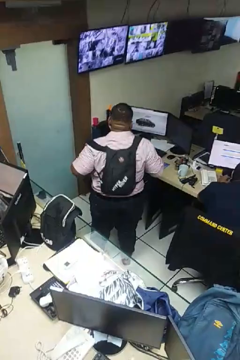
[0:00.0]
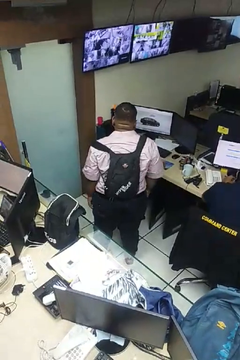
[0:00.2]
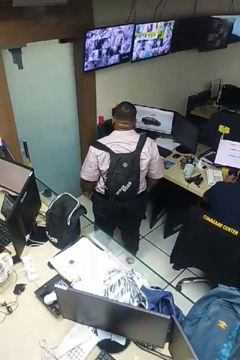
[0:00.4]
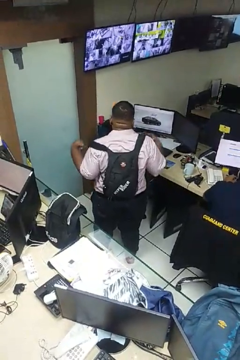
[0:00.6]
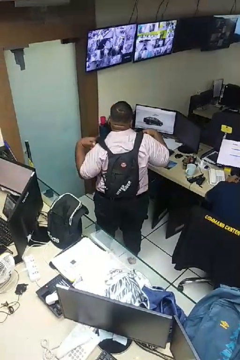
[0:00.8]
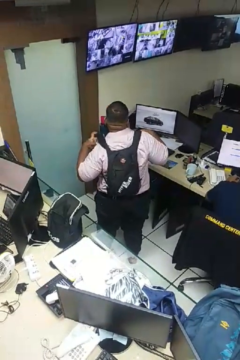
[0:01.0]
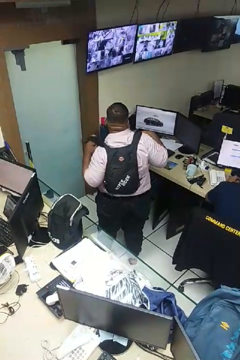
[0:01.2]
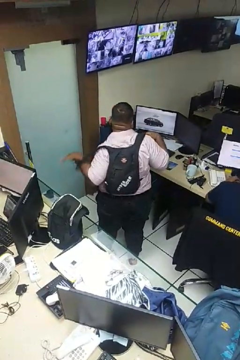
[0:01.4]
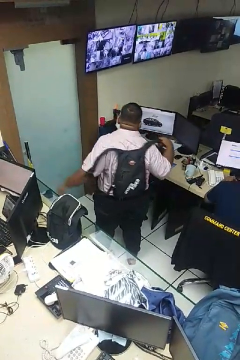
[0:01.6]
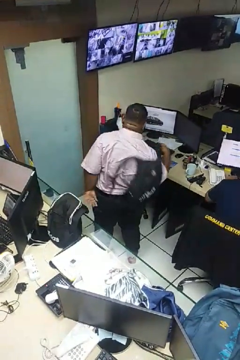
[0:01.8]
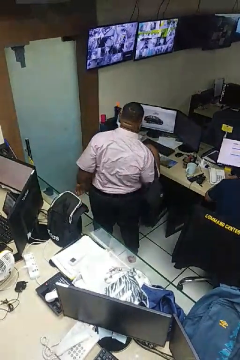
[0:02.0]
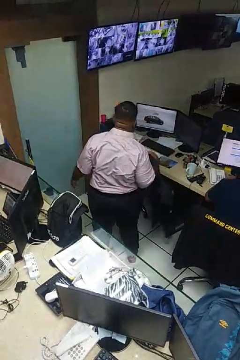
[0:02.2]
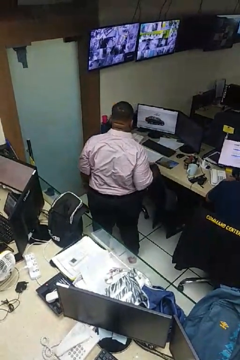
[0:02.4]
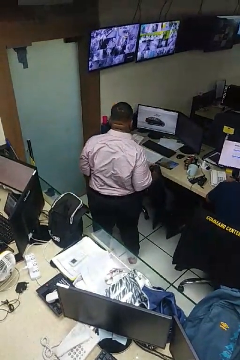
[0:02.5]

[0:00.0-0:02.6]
person takes off backpack

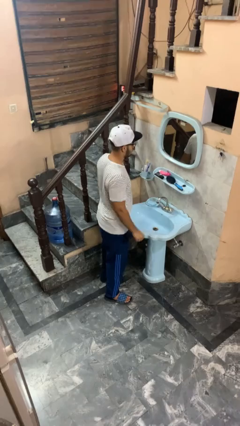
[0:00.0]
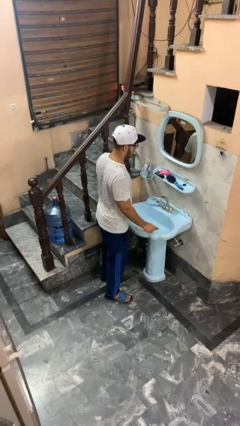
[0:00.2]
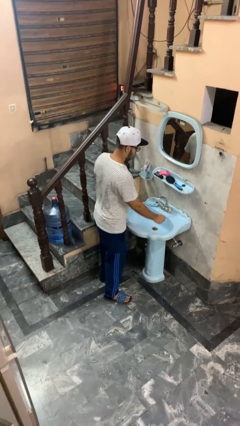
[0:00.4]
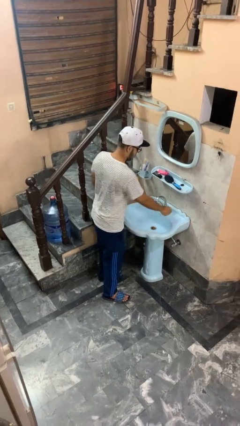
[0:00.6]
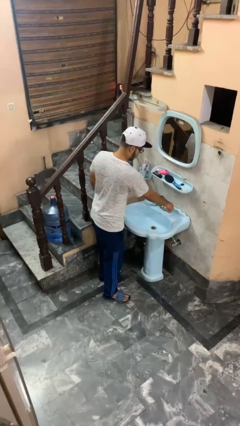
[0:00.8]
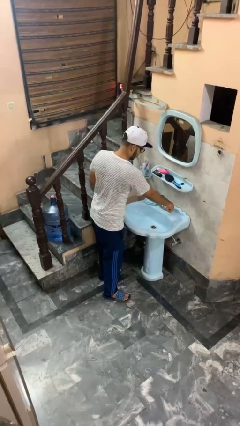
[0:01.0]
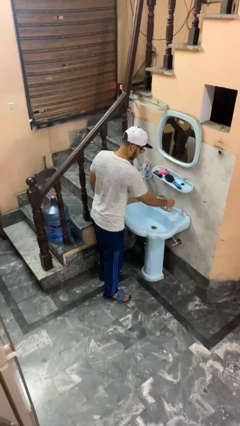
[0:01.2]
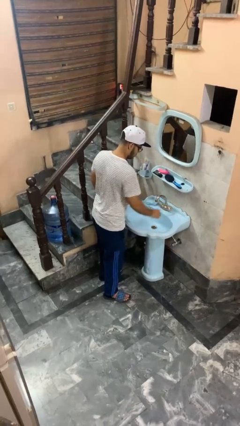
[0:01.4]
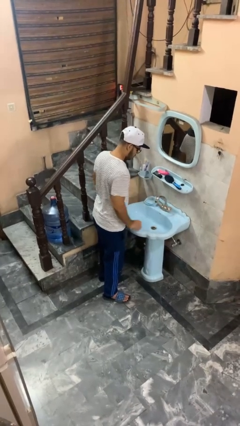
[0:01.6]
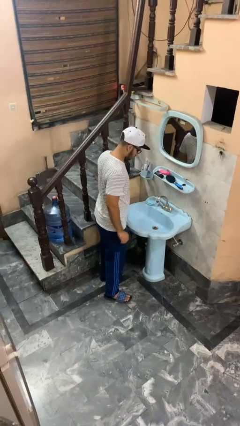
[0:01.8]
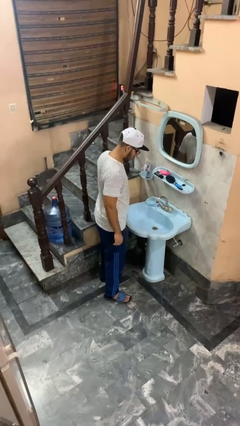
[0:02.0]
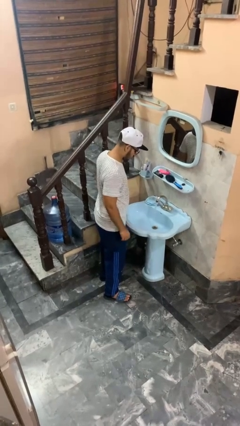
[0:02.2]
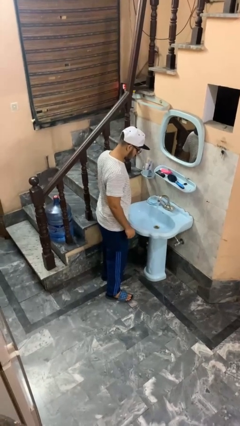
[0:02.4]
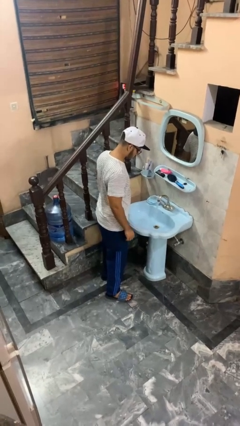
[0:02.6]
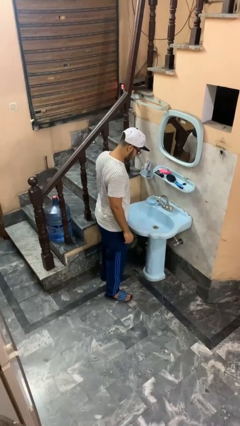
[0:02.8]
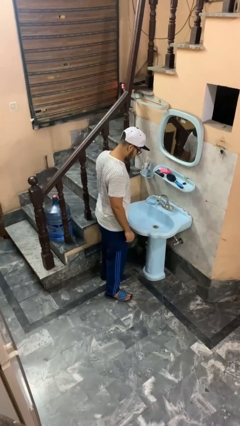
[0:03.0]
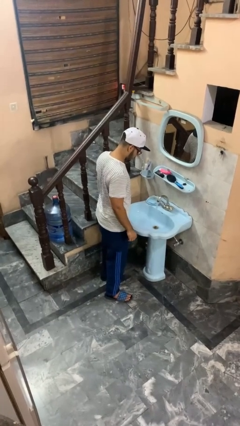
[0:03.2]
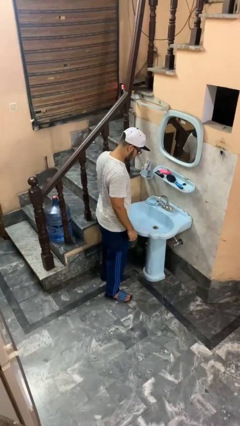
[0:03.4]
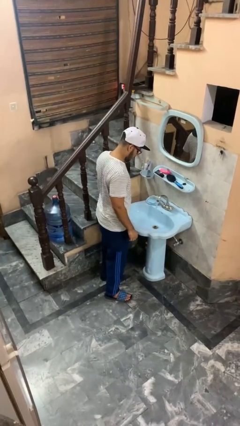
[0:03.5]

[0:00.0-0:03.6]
person turns on faucet

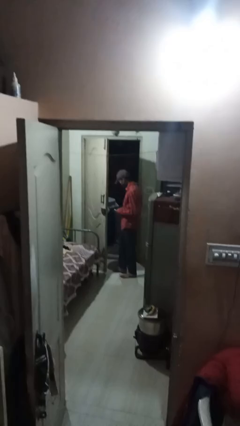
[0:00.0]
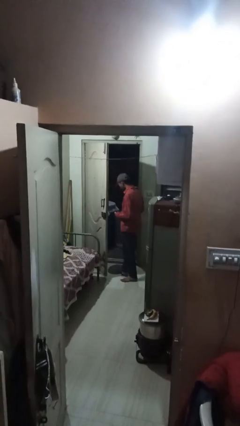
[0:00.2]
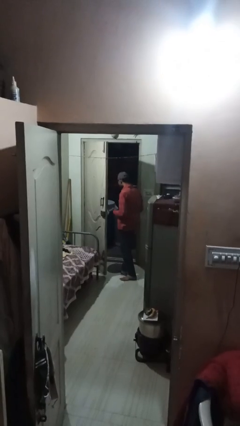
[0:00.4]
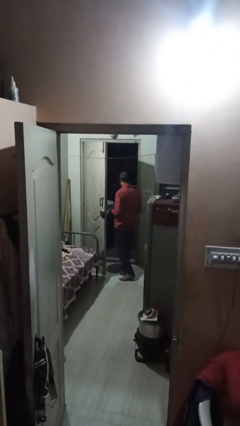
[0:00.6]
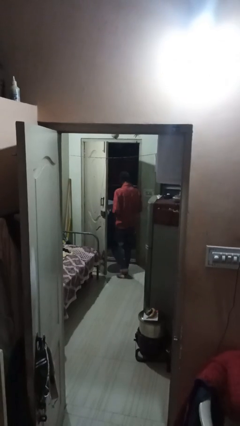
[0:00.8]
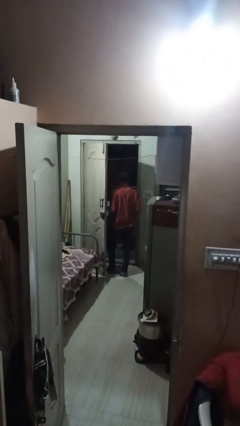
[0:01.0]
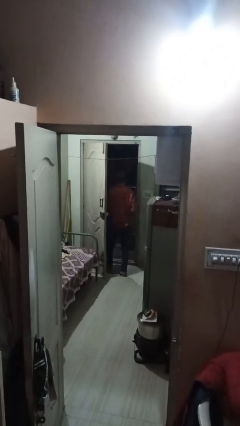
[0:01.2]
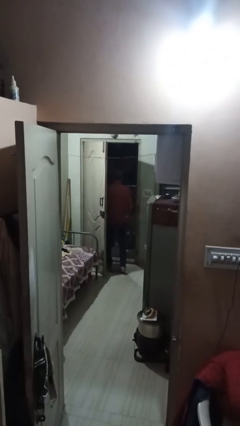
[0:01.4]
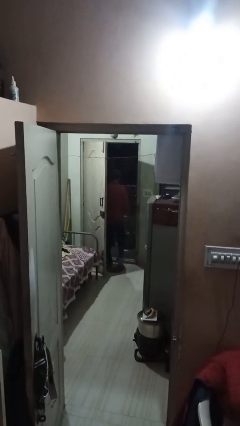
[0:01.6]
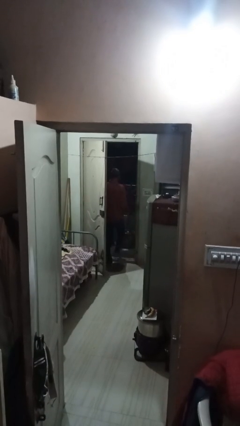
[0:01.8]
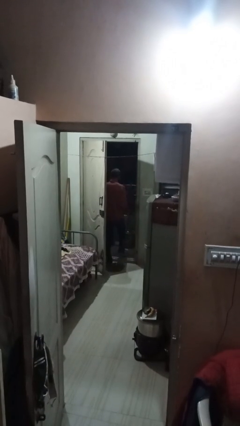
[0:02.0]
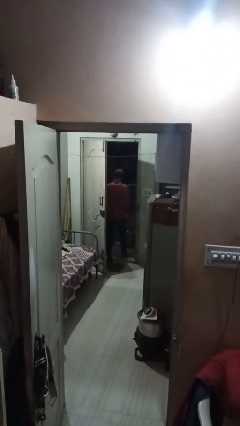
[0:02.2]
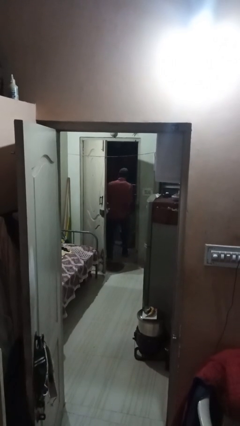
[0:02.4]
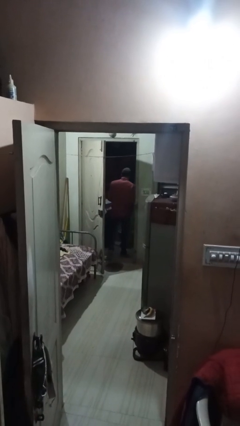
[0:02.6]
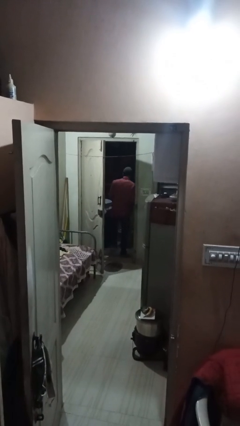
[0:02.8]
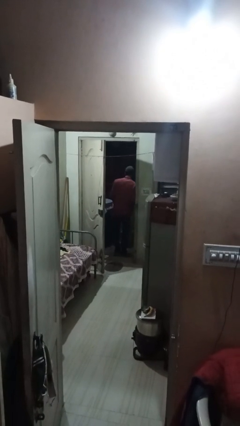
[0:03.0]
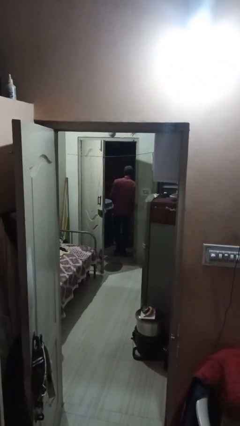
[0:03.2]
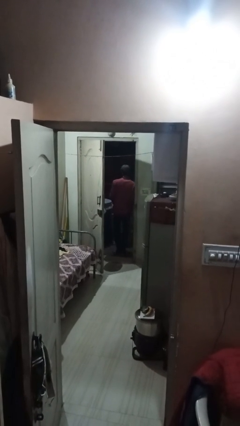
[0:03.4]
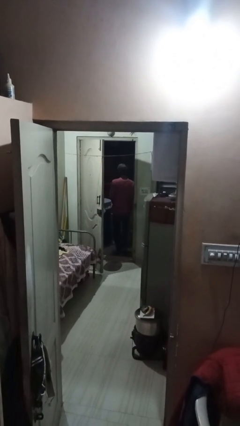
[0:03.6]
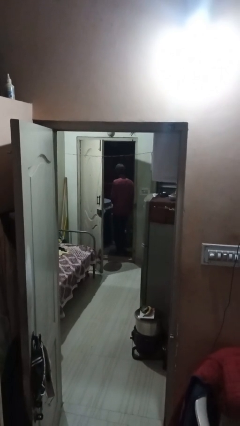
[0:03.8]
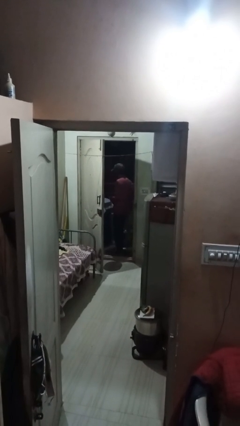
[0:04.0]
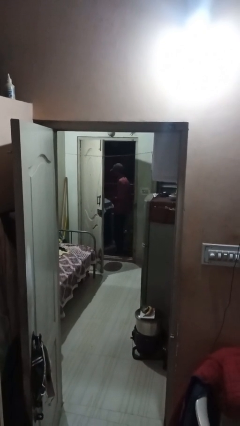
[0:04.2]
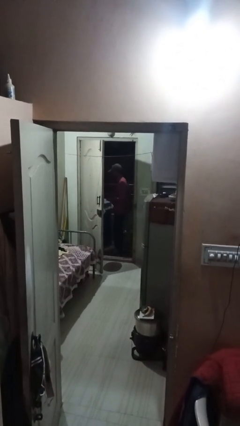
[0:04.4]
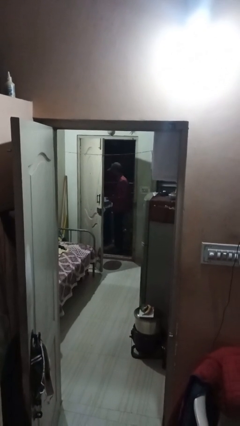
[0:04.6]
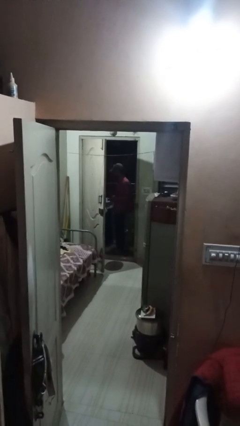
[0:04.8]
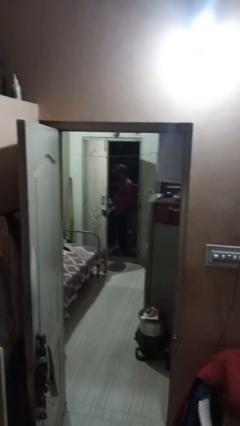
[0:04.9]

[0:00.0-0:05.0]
person exits scene through structure

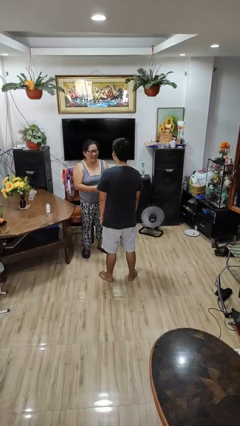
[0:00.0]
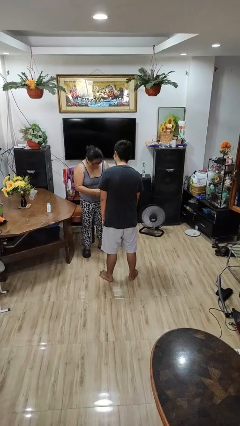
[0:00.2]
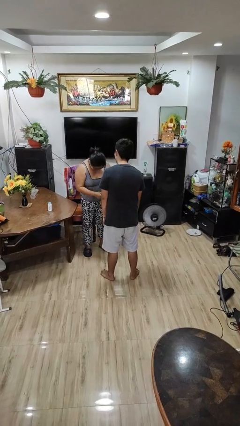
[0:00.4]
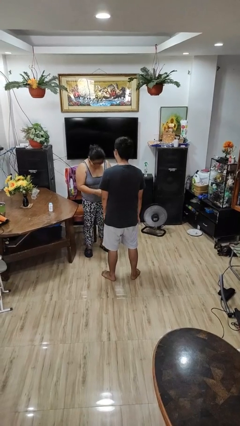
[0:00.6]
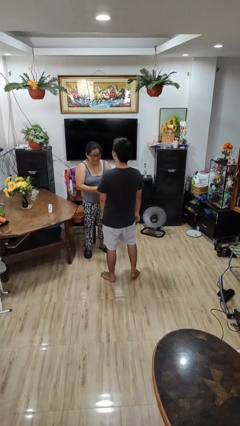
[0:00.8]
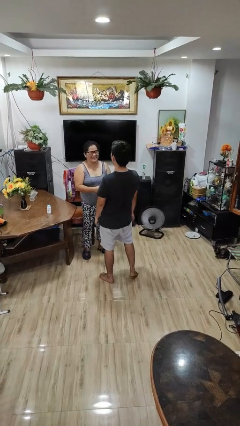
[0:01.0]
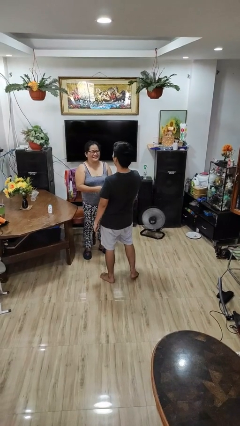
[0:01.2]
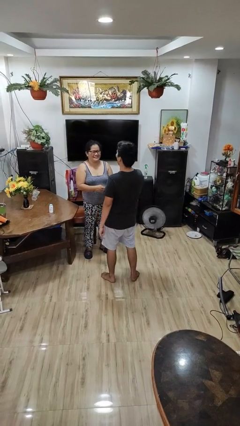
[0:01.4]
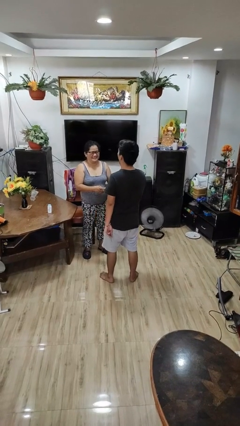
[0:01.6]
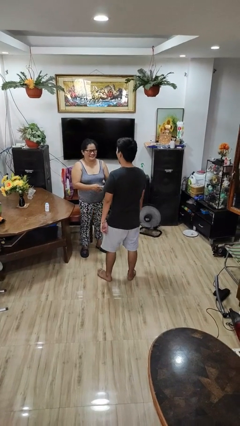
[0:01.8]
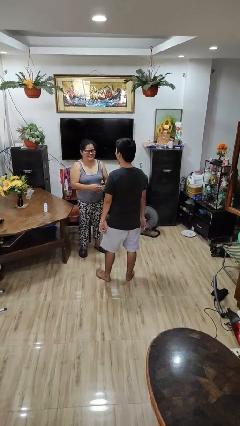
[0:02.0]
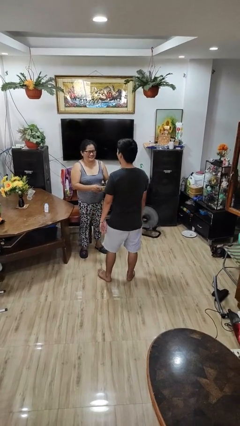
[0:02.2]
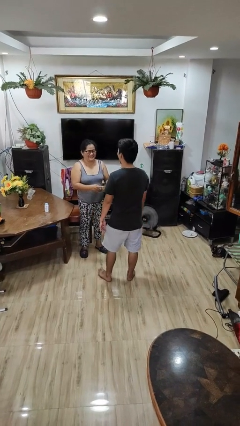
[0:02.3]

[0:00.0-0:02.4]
person laughs with person

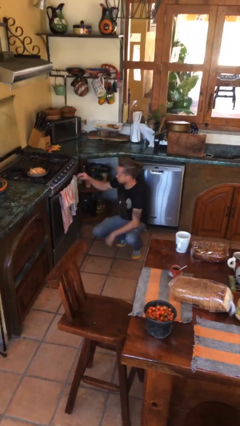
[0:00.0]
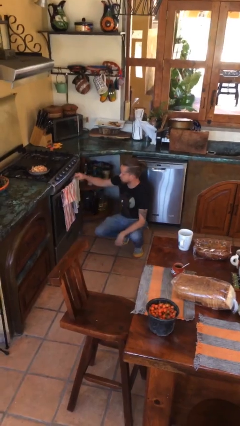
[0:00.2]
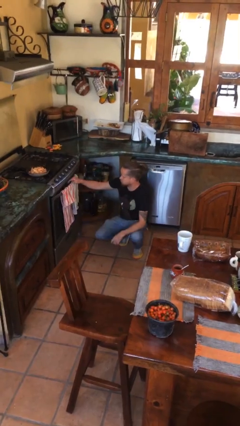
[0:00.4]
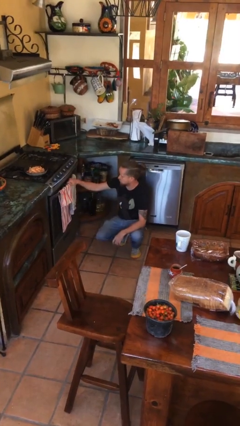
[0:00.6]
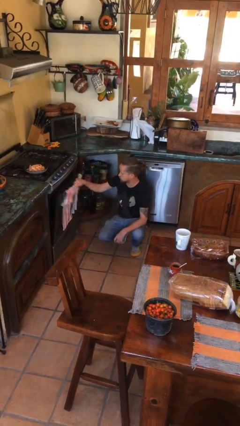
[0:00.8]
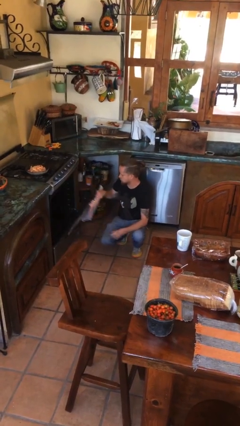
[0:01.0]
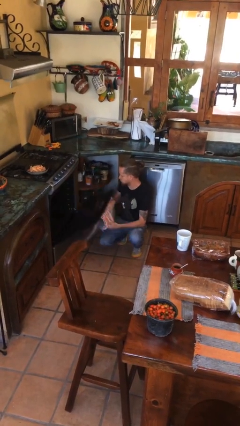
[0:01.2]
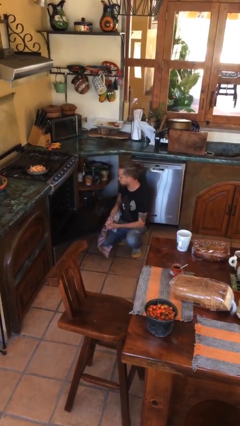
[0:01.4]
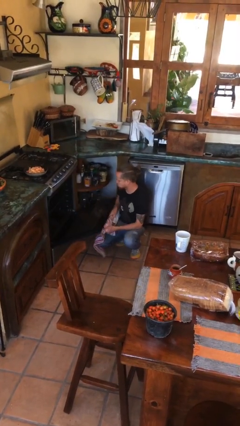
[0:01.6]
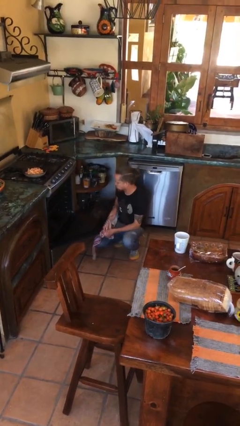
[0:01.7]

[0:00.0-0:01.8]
person opens oven door

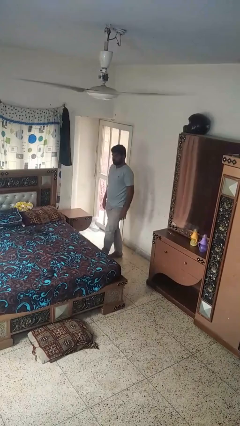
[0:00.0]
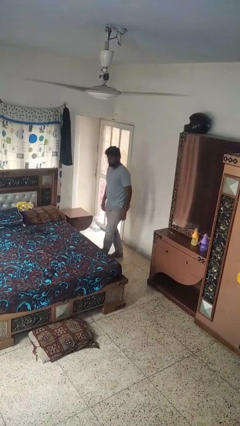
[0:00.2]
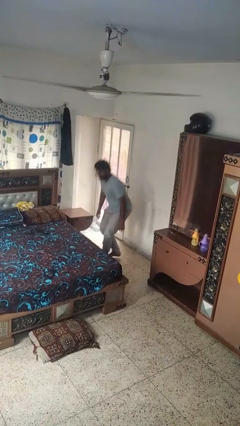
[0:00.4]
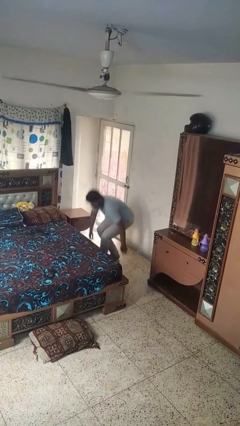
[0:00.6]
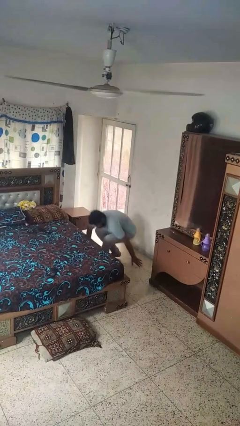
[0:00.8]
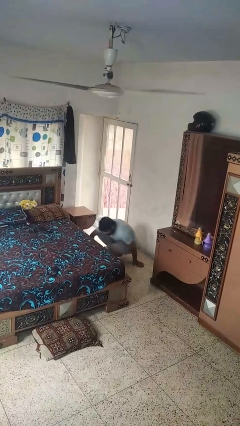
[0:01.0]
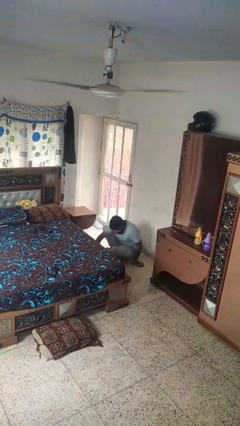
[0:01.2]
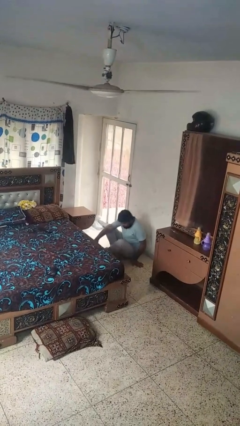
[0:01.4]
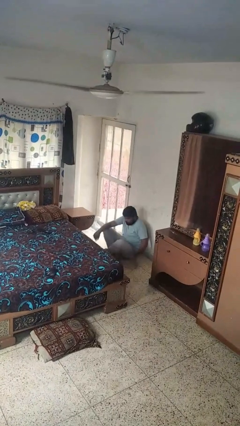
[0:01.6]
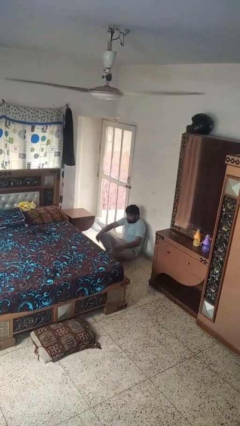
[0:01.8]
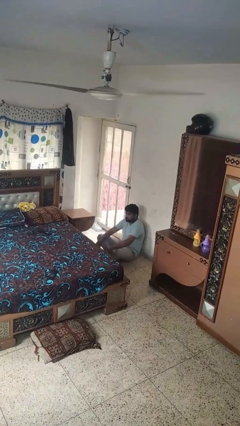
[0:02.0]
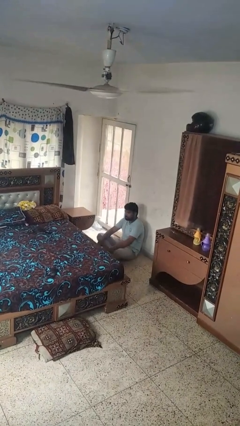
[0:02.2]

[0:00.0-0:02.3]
person sits crisscross

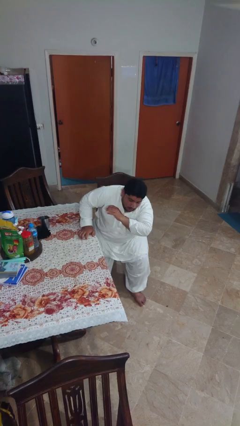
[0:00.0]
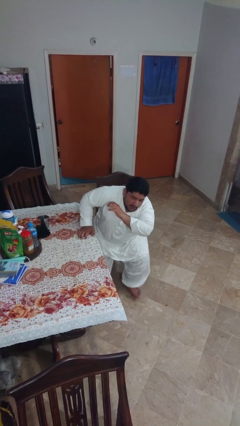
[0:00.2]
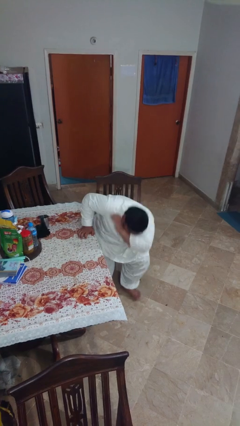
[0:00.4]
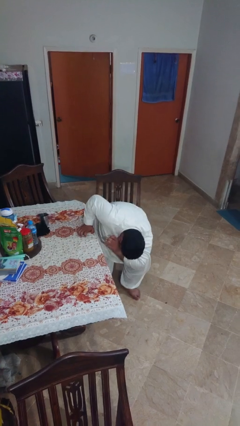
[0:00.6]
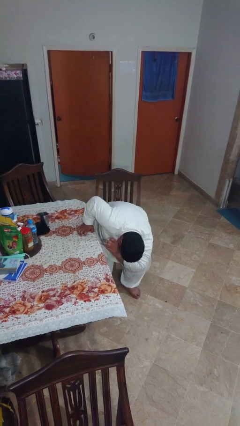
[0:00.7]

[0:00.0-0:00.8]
person sneezes into arm
